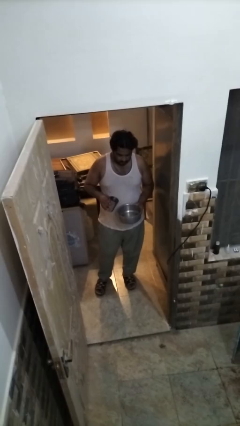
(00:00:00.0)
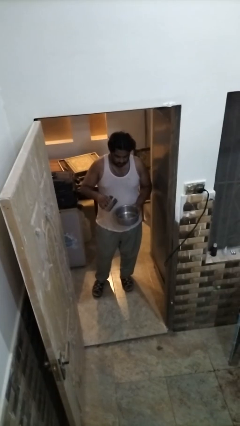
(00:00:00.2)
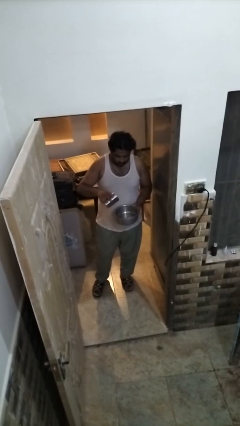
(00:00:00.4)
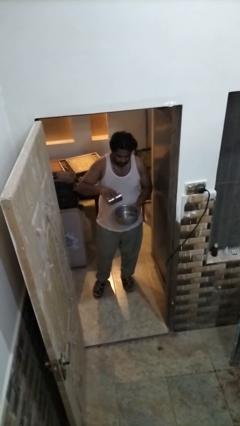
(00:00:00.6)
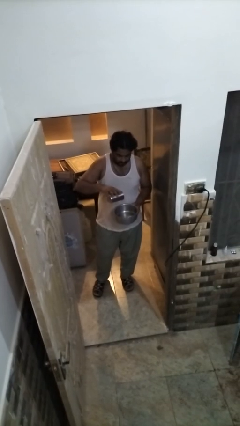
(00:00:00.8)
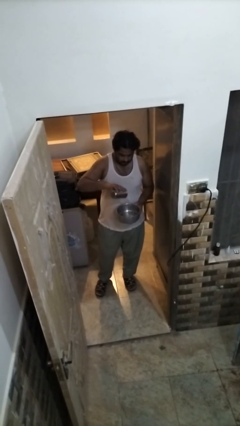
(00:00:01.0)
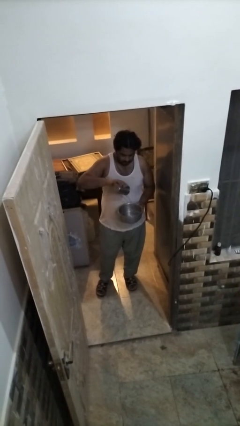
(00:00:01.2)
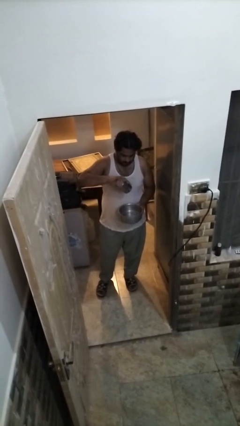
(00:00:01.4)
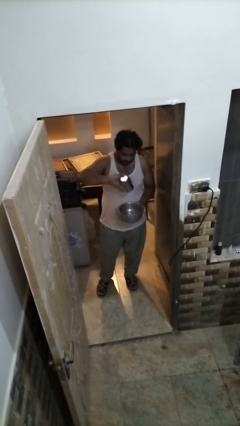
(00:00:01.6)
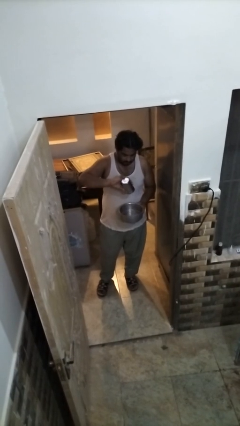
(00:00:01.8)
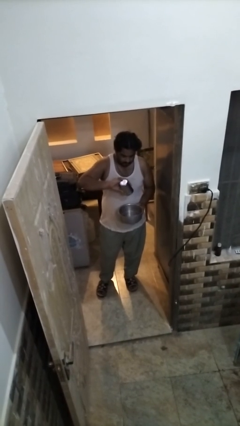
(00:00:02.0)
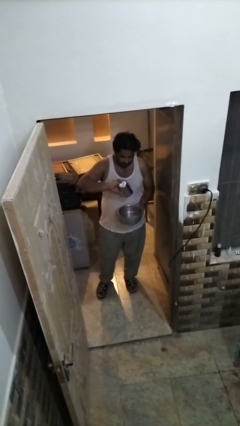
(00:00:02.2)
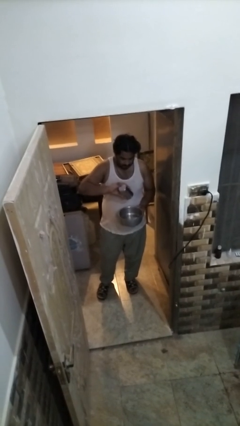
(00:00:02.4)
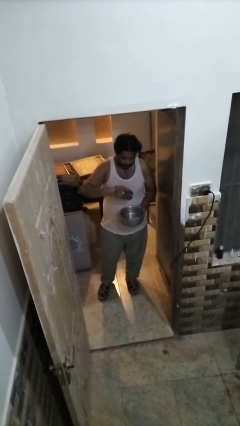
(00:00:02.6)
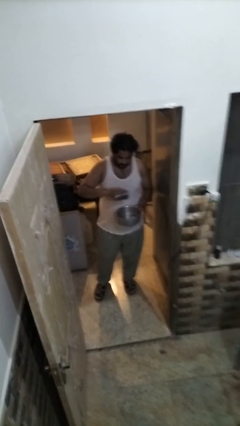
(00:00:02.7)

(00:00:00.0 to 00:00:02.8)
person pours into bowl

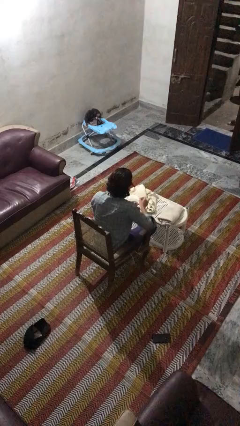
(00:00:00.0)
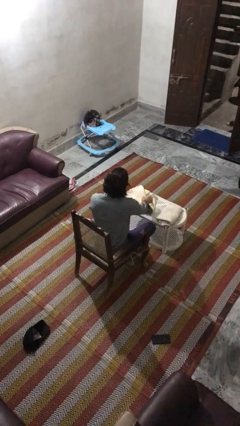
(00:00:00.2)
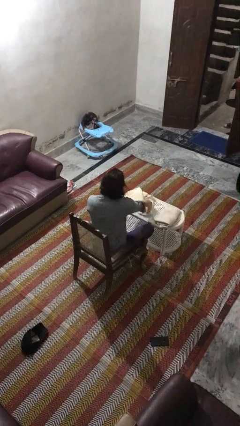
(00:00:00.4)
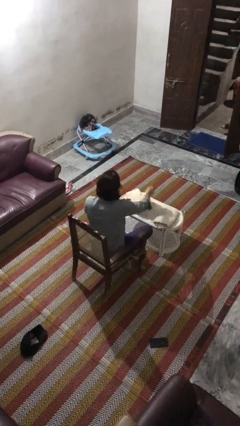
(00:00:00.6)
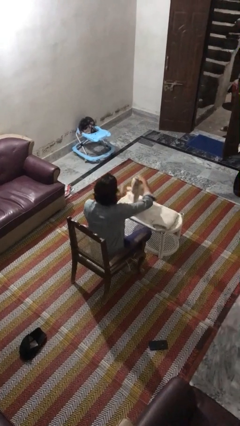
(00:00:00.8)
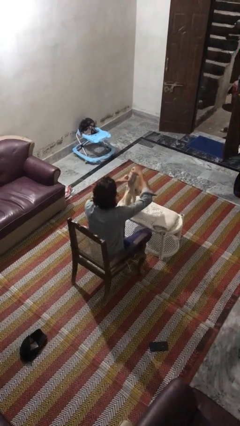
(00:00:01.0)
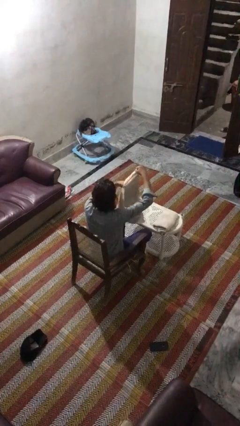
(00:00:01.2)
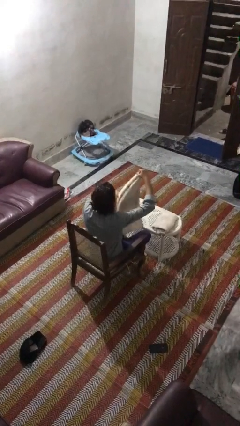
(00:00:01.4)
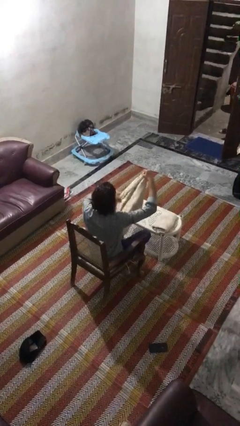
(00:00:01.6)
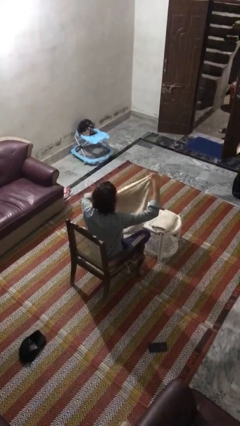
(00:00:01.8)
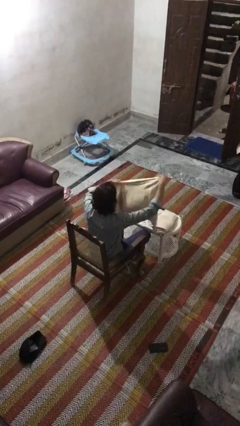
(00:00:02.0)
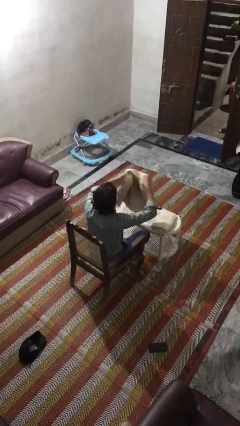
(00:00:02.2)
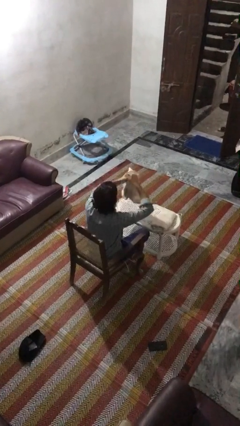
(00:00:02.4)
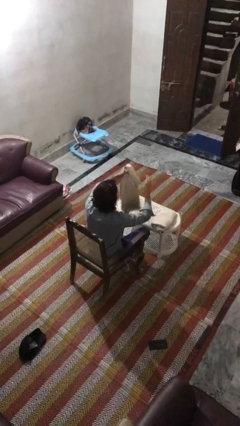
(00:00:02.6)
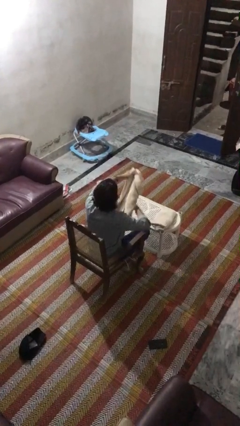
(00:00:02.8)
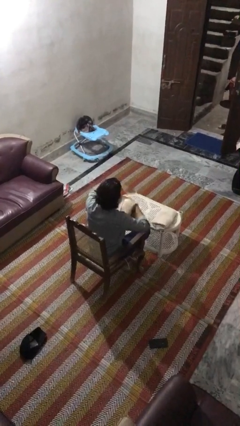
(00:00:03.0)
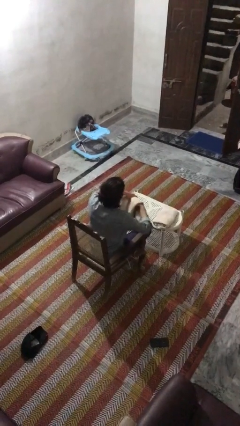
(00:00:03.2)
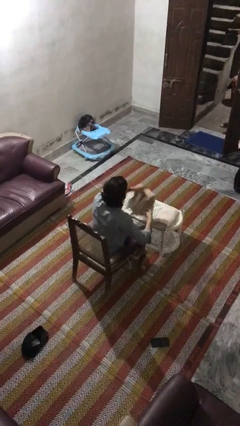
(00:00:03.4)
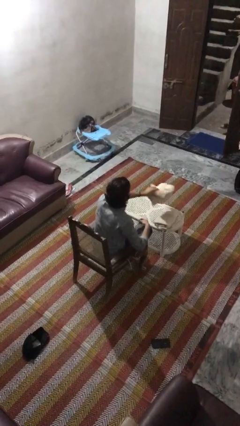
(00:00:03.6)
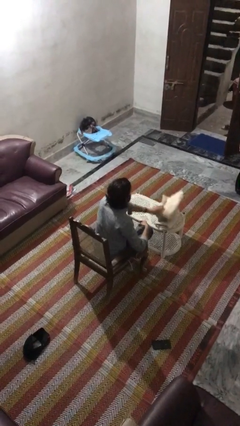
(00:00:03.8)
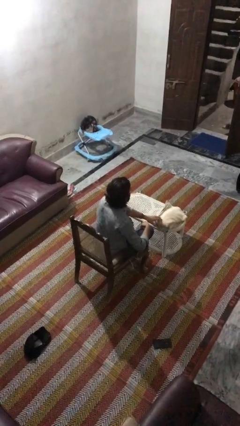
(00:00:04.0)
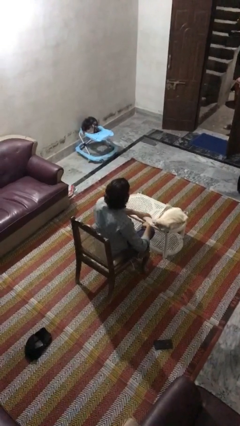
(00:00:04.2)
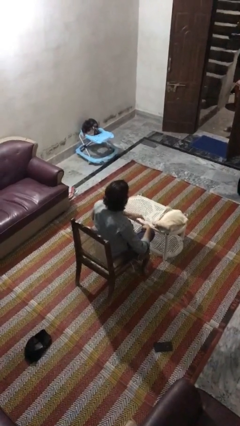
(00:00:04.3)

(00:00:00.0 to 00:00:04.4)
person folds towel

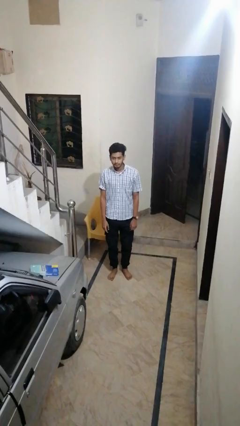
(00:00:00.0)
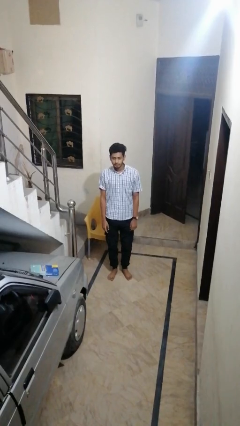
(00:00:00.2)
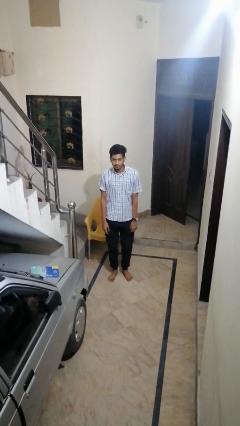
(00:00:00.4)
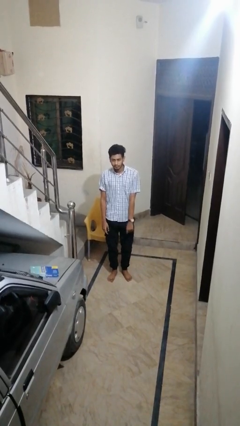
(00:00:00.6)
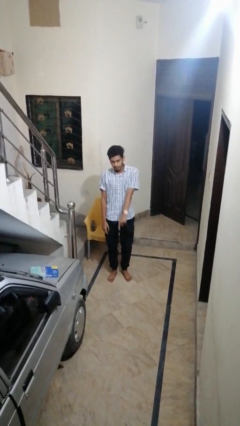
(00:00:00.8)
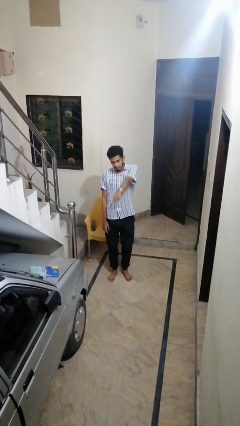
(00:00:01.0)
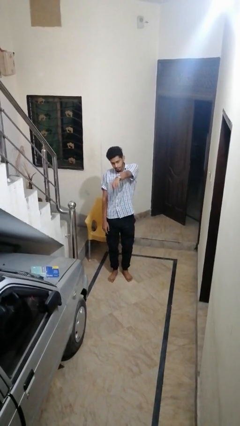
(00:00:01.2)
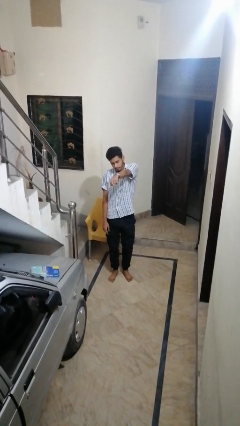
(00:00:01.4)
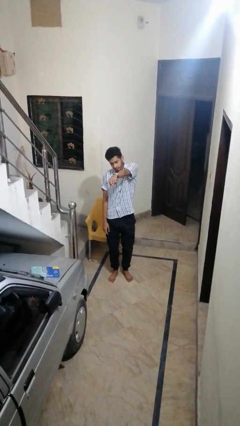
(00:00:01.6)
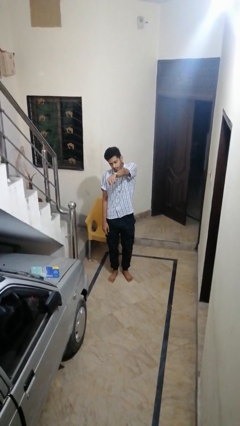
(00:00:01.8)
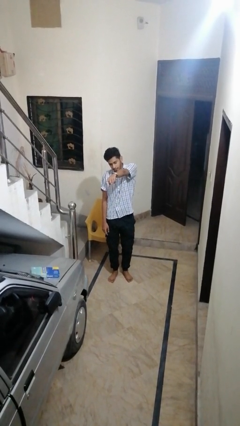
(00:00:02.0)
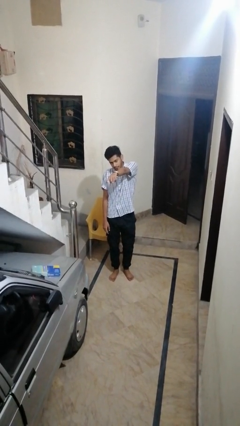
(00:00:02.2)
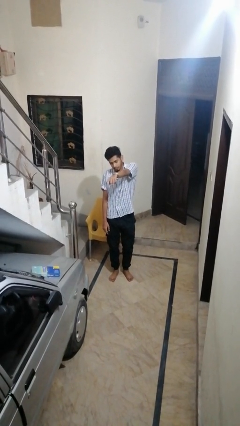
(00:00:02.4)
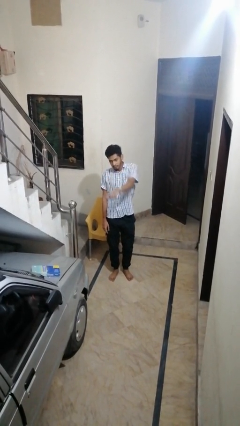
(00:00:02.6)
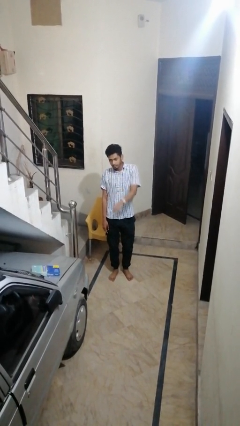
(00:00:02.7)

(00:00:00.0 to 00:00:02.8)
person points at person

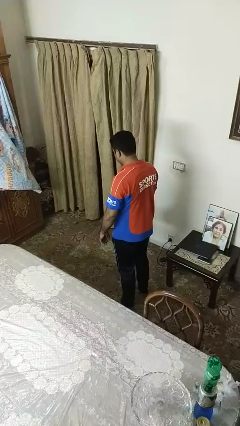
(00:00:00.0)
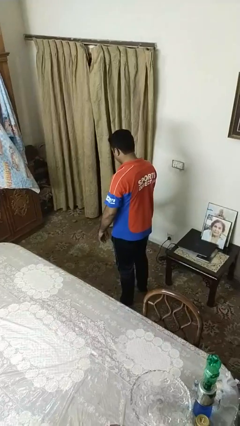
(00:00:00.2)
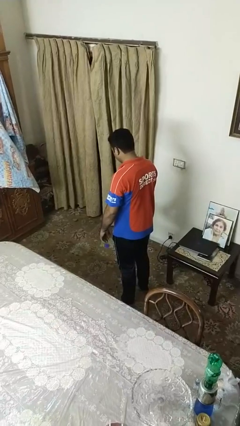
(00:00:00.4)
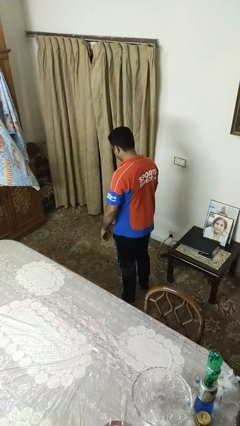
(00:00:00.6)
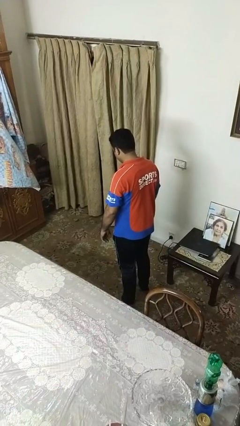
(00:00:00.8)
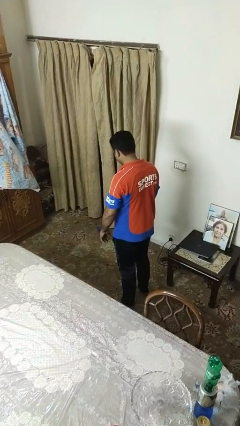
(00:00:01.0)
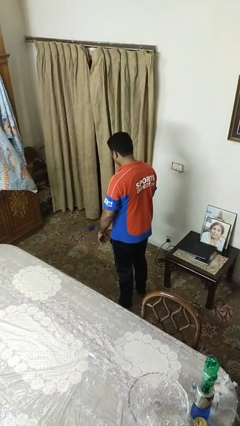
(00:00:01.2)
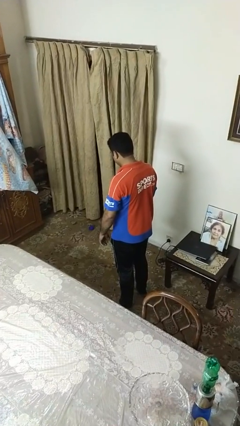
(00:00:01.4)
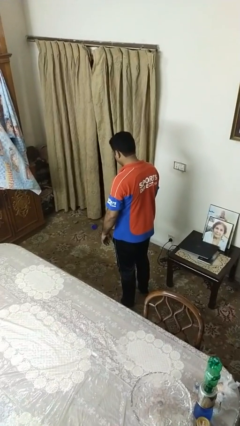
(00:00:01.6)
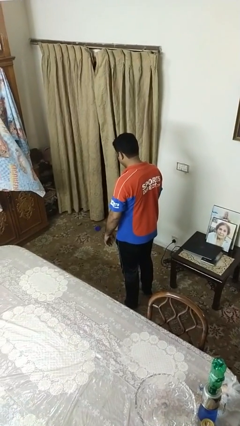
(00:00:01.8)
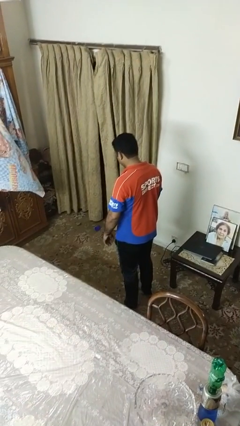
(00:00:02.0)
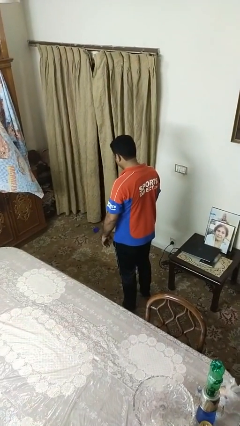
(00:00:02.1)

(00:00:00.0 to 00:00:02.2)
person throws object to ground

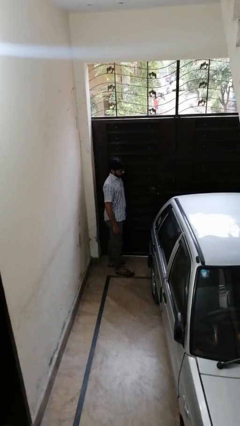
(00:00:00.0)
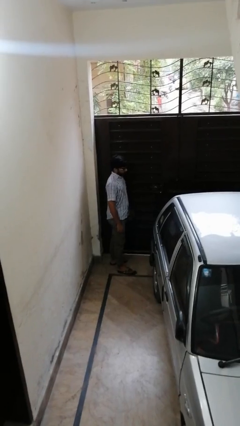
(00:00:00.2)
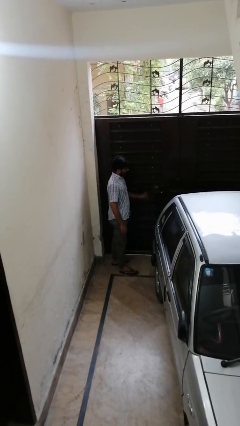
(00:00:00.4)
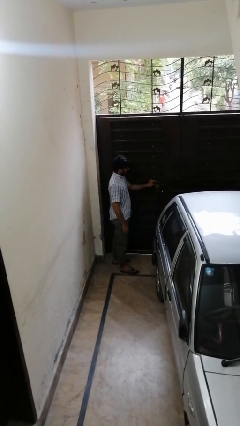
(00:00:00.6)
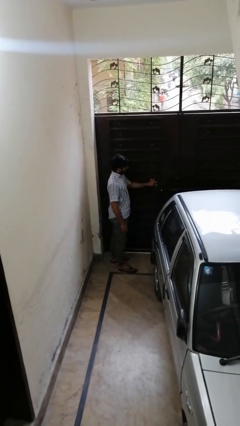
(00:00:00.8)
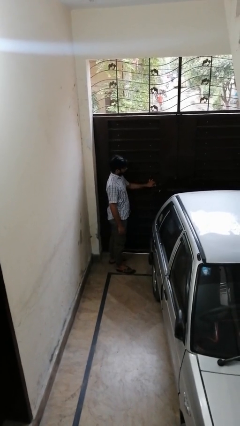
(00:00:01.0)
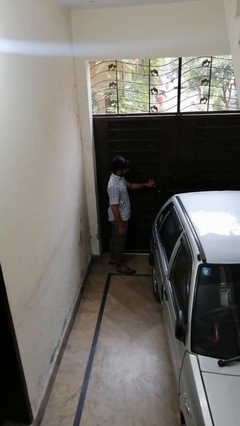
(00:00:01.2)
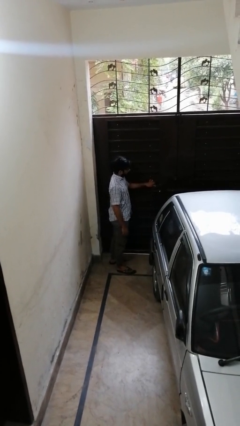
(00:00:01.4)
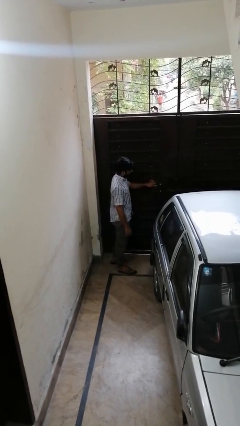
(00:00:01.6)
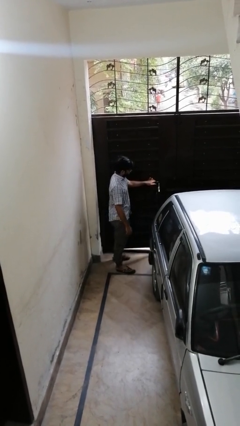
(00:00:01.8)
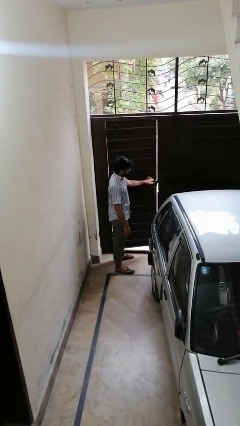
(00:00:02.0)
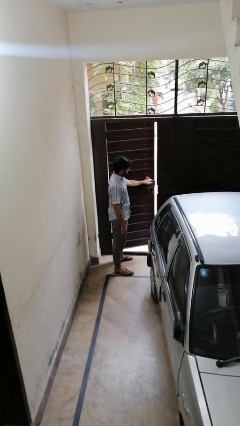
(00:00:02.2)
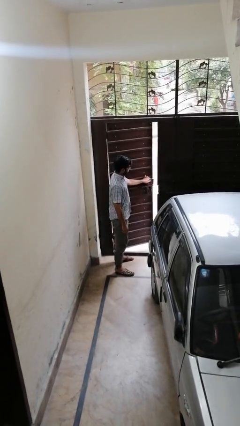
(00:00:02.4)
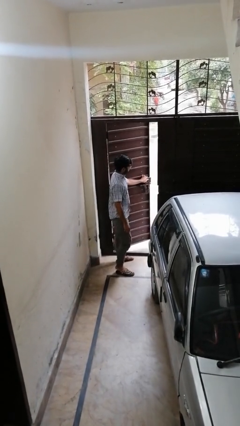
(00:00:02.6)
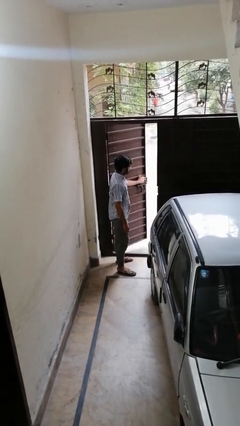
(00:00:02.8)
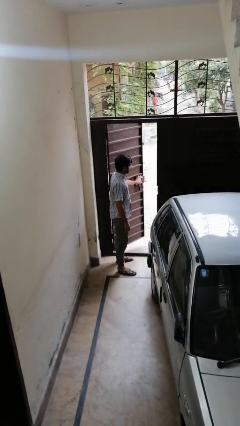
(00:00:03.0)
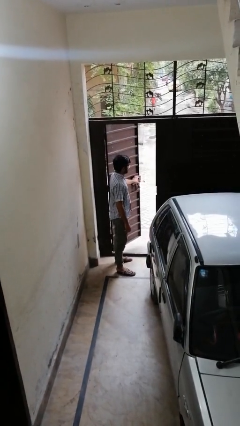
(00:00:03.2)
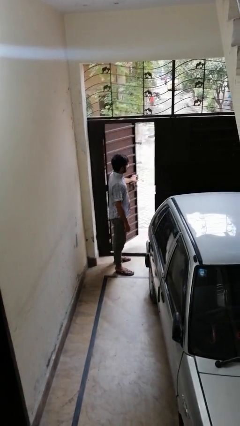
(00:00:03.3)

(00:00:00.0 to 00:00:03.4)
person opens gate

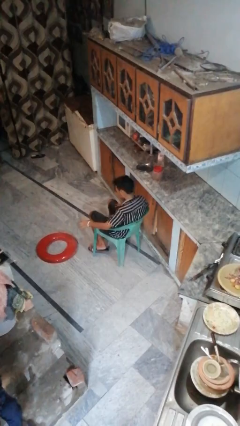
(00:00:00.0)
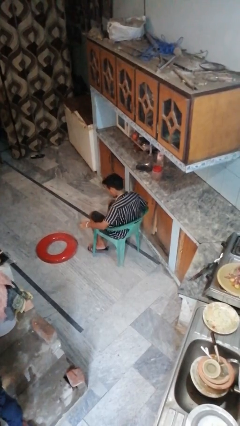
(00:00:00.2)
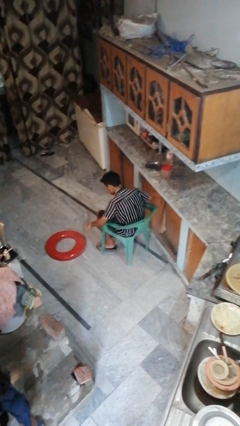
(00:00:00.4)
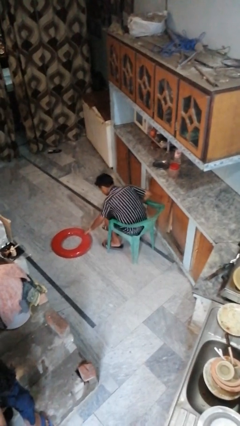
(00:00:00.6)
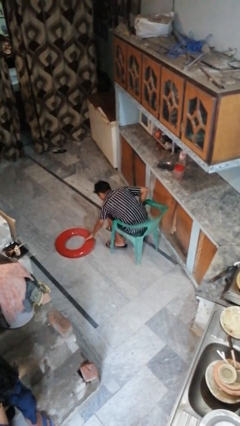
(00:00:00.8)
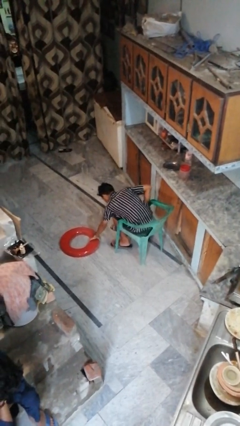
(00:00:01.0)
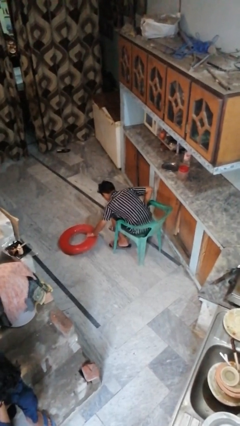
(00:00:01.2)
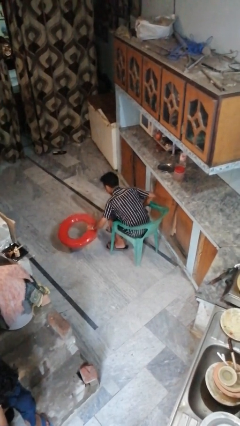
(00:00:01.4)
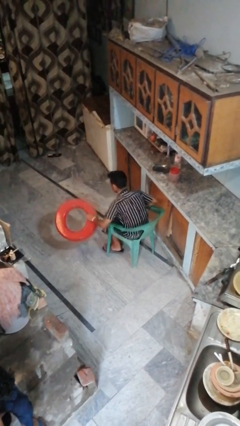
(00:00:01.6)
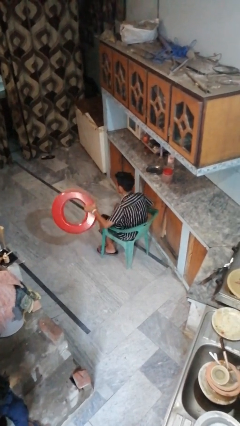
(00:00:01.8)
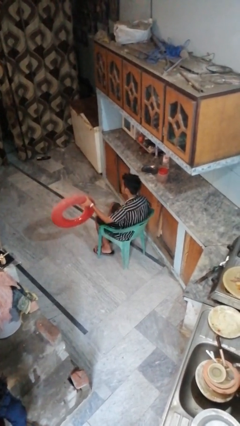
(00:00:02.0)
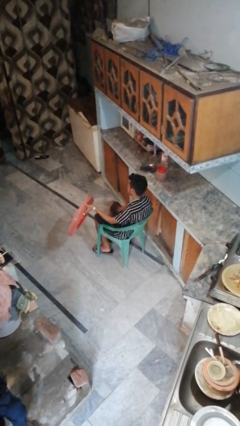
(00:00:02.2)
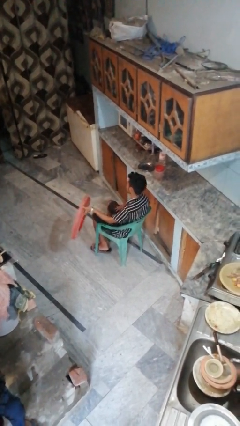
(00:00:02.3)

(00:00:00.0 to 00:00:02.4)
person picks up object from floor
